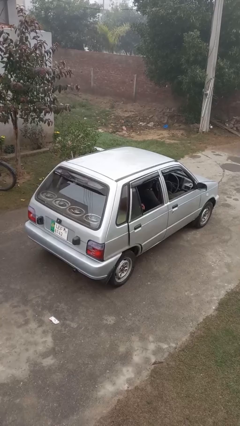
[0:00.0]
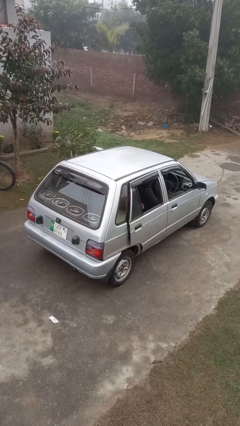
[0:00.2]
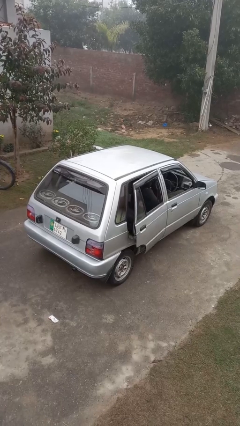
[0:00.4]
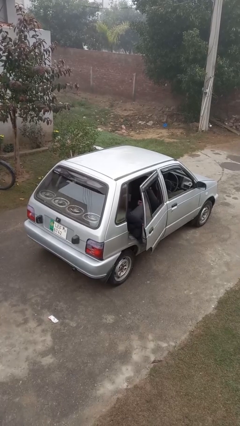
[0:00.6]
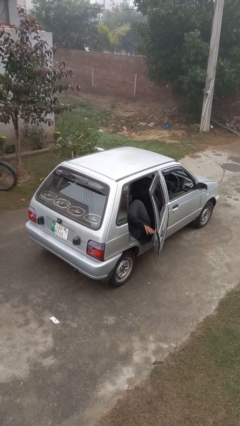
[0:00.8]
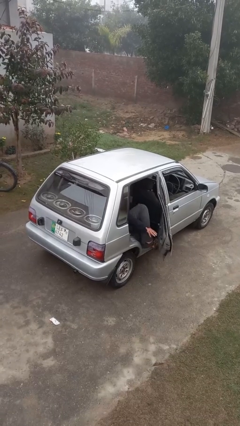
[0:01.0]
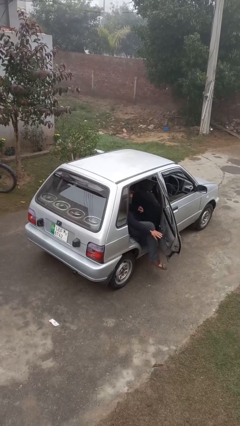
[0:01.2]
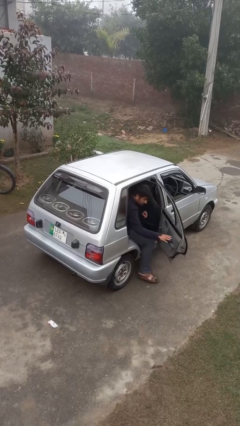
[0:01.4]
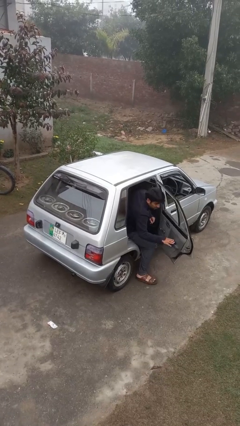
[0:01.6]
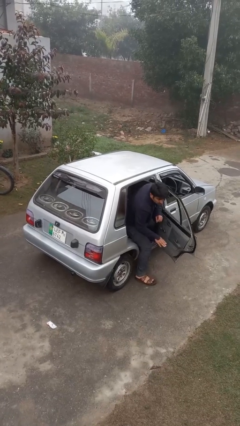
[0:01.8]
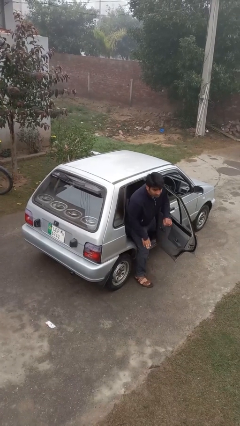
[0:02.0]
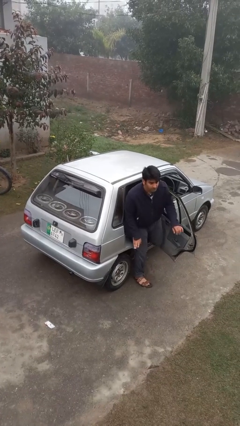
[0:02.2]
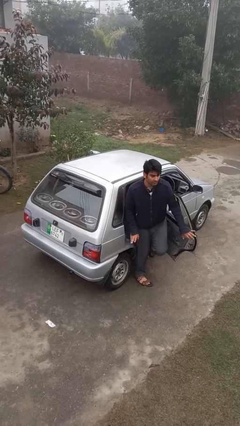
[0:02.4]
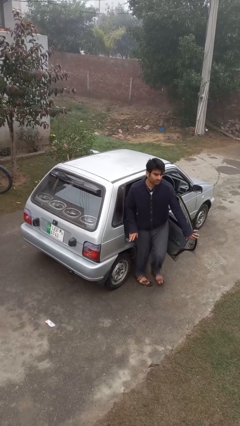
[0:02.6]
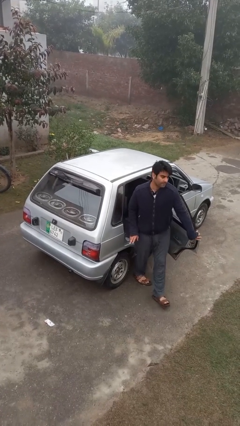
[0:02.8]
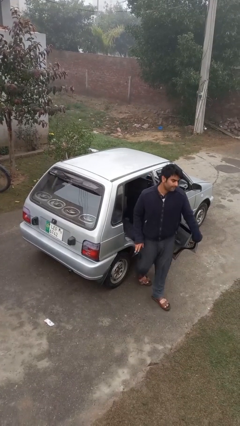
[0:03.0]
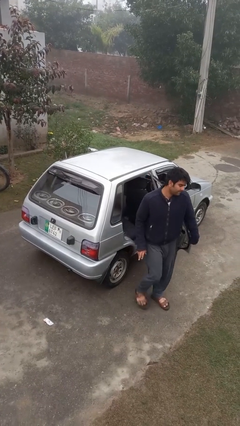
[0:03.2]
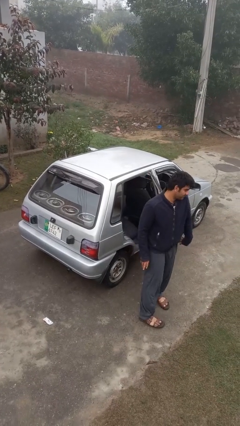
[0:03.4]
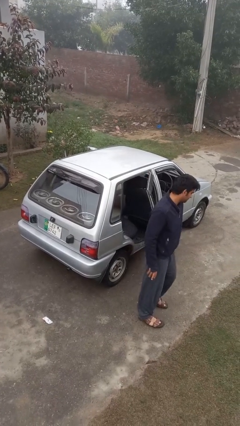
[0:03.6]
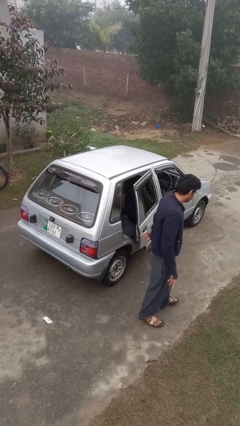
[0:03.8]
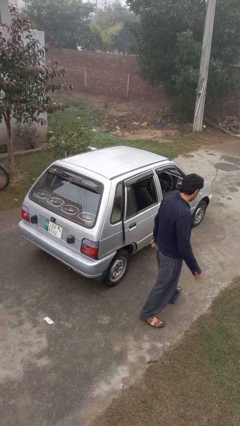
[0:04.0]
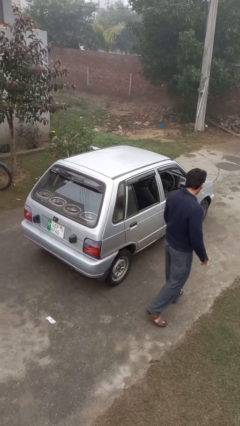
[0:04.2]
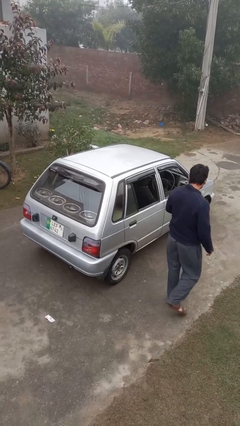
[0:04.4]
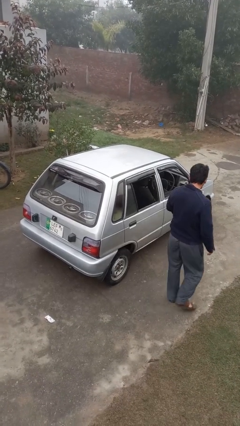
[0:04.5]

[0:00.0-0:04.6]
car drops off person

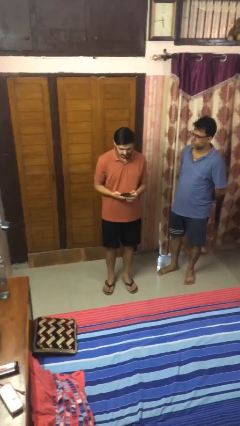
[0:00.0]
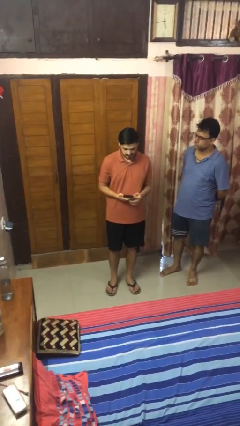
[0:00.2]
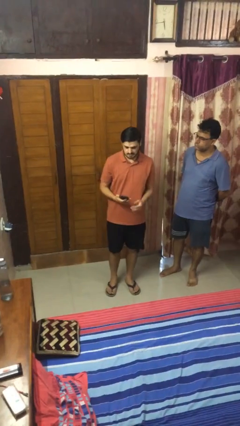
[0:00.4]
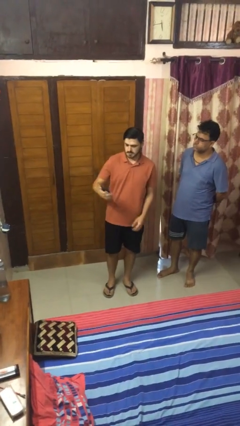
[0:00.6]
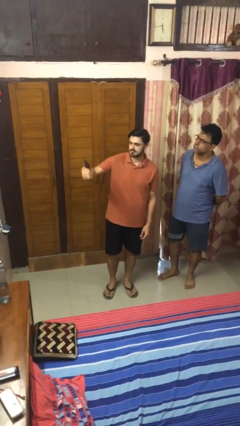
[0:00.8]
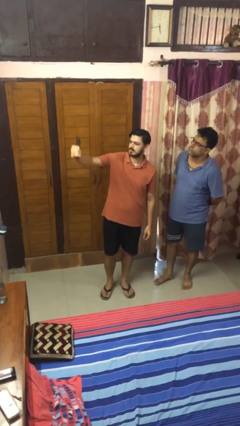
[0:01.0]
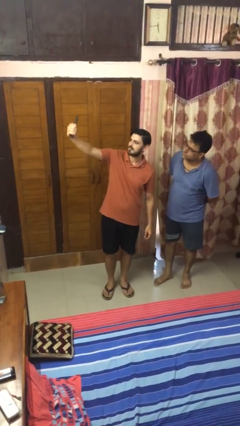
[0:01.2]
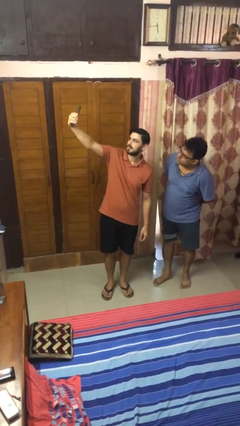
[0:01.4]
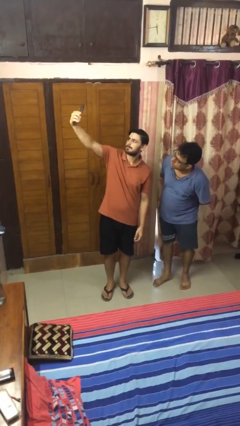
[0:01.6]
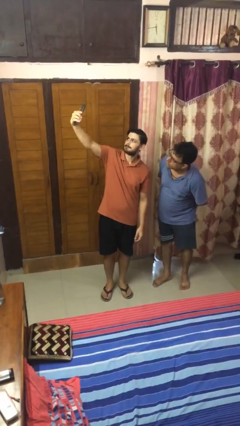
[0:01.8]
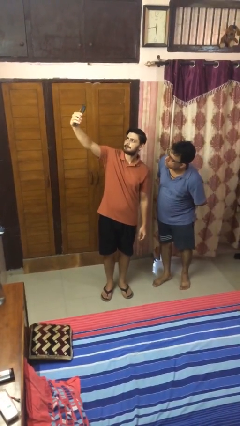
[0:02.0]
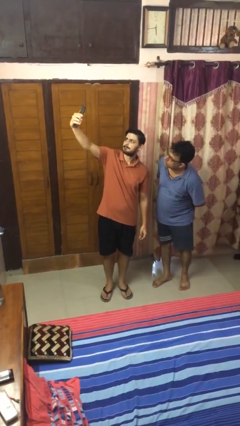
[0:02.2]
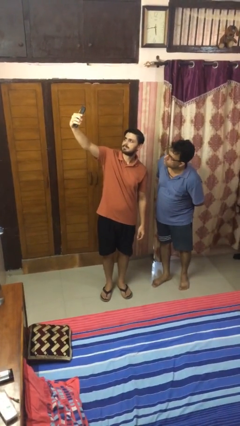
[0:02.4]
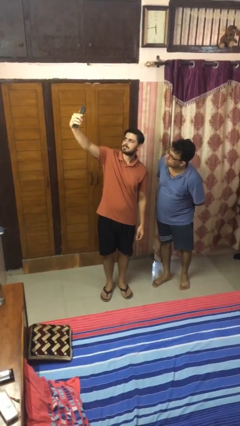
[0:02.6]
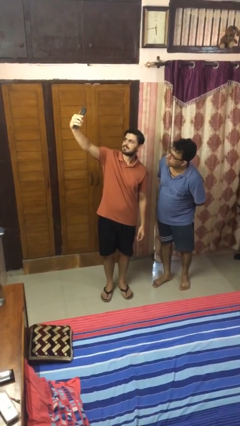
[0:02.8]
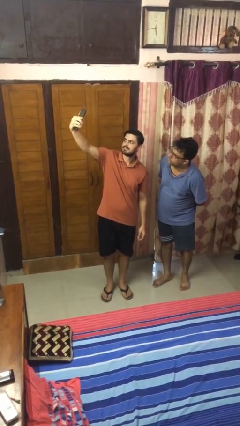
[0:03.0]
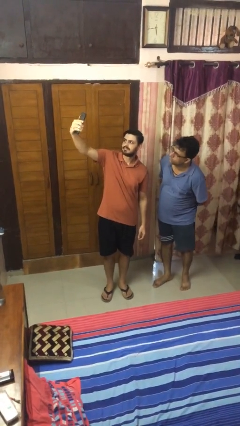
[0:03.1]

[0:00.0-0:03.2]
person takes selfie with person

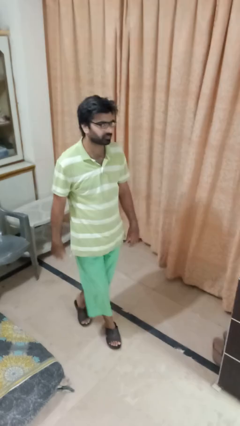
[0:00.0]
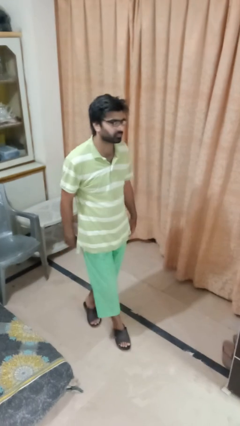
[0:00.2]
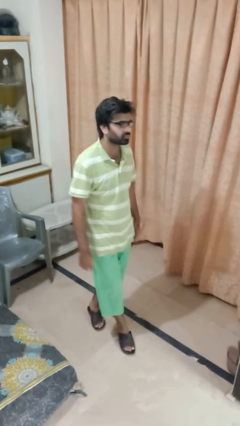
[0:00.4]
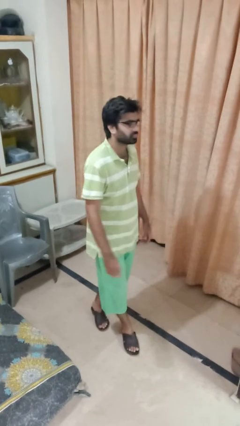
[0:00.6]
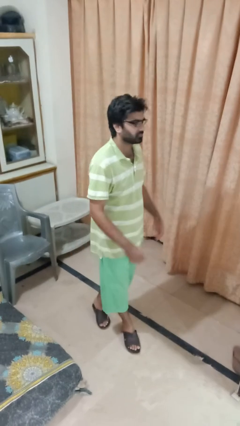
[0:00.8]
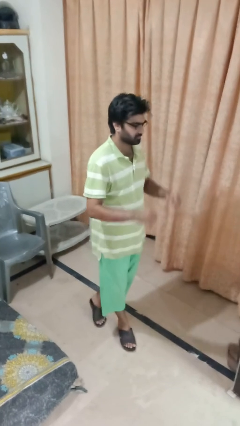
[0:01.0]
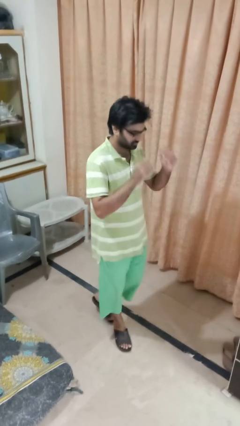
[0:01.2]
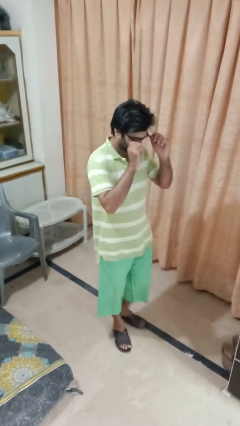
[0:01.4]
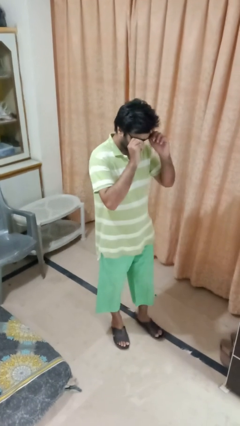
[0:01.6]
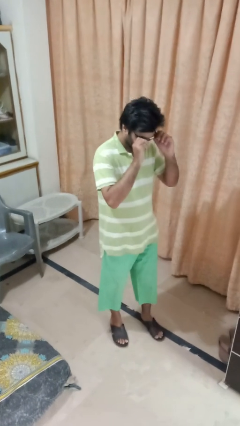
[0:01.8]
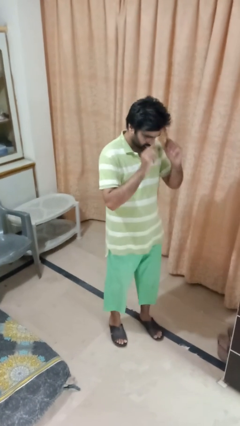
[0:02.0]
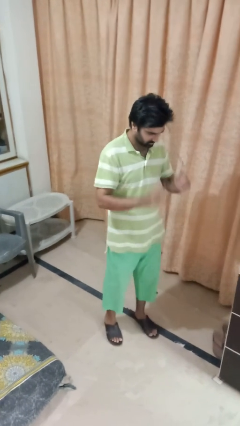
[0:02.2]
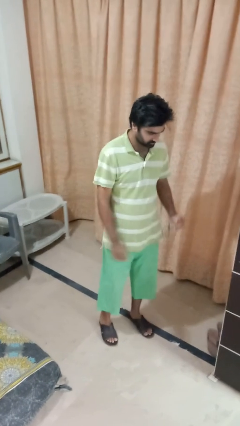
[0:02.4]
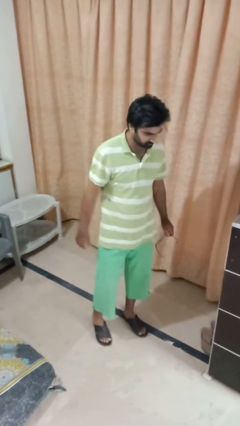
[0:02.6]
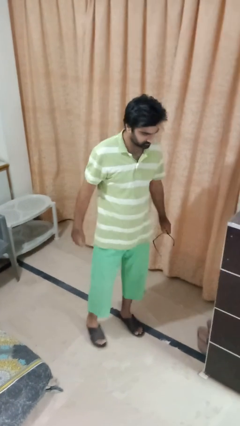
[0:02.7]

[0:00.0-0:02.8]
person takes off glasses

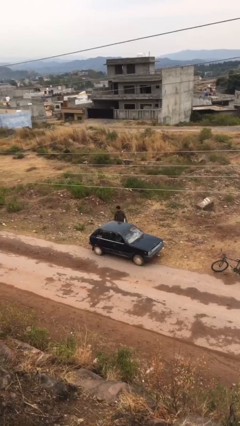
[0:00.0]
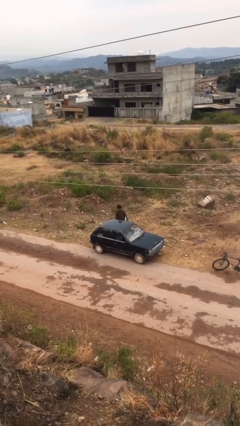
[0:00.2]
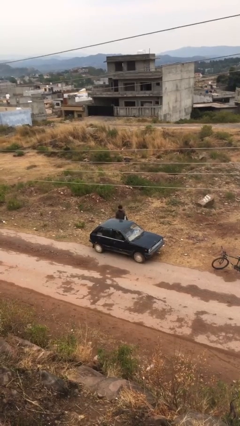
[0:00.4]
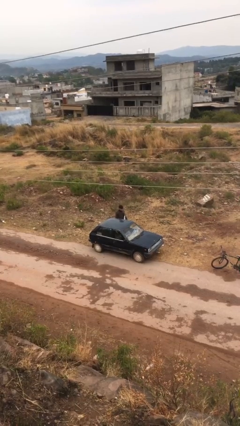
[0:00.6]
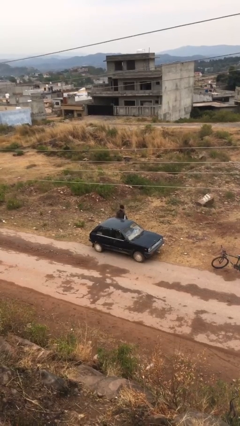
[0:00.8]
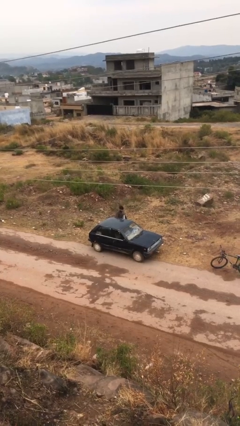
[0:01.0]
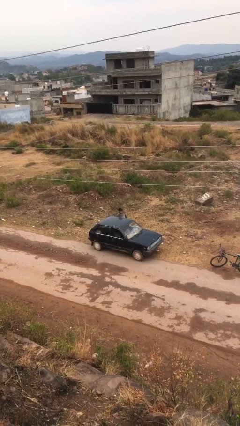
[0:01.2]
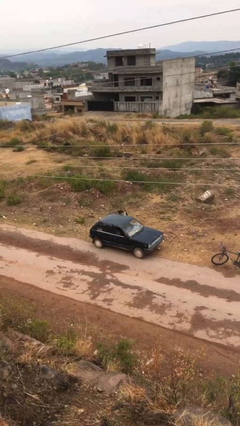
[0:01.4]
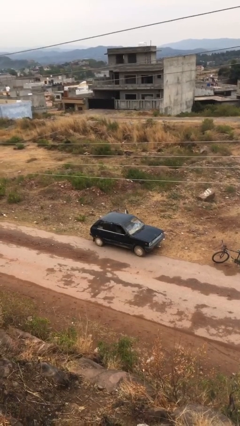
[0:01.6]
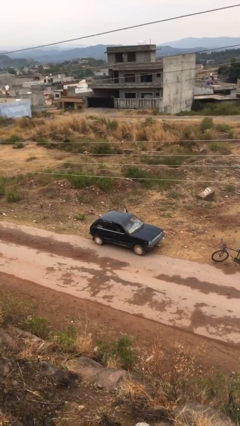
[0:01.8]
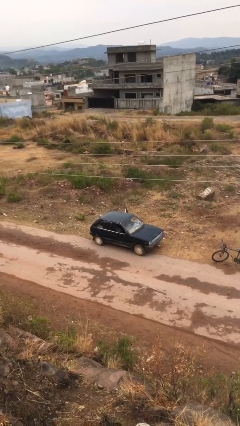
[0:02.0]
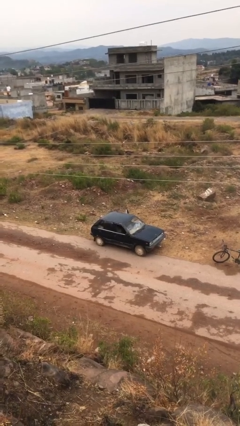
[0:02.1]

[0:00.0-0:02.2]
person enters car

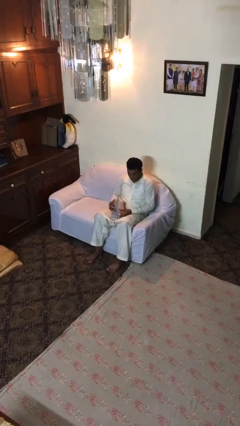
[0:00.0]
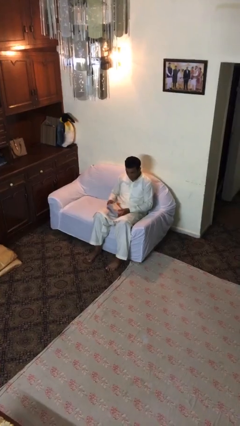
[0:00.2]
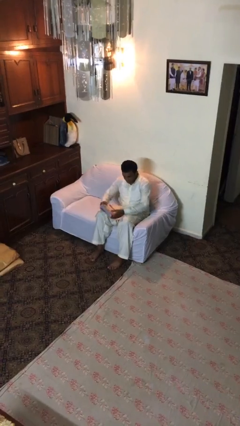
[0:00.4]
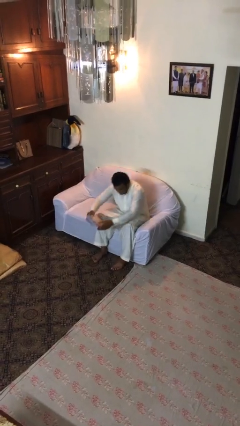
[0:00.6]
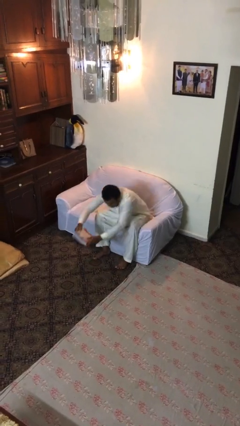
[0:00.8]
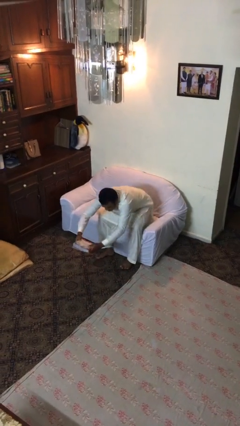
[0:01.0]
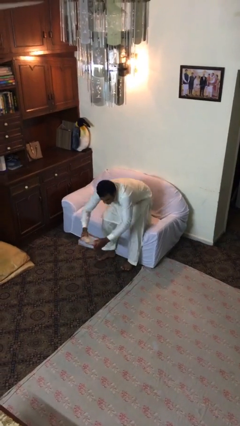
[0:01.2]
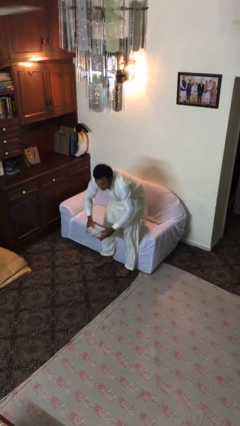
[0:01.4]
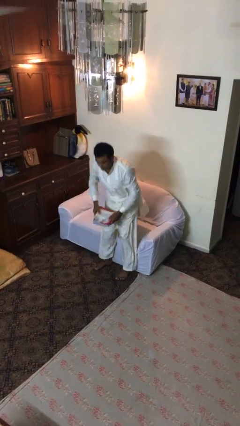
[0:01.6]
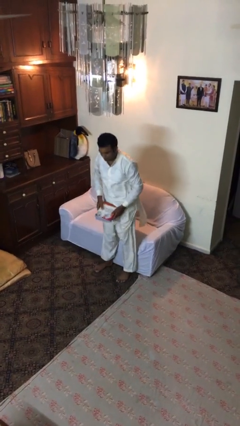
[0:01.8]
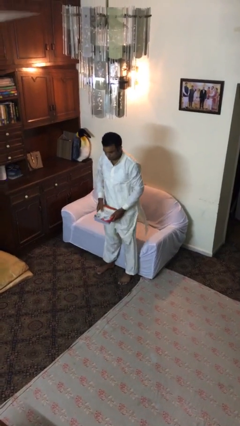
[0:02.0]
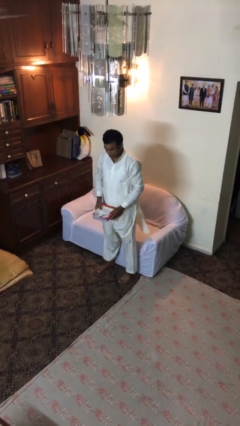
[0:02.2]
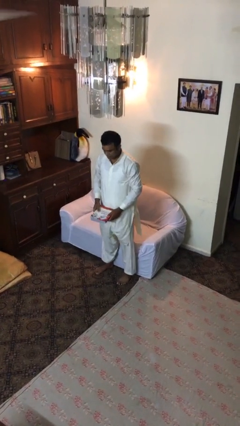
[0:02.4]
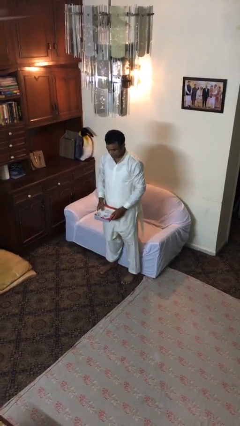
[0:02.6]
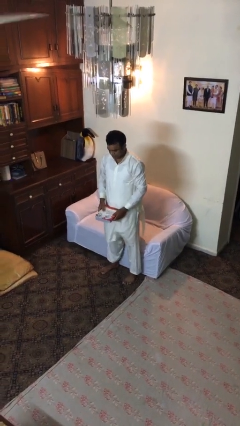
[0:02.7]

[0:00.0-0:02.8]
person stands up

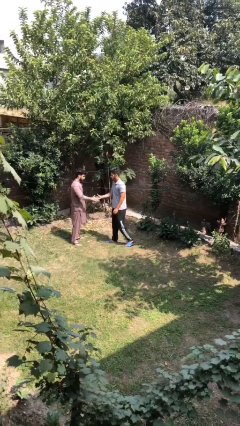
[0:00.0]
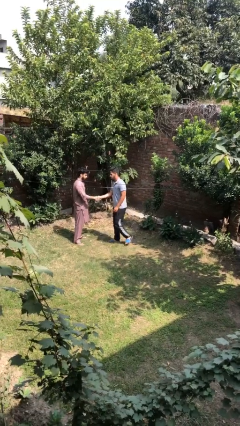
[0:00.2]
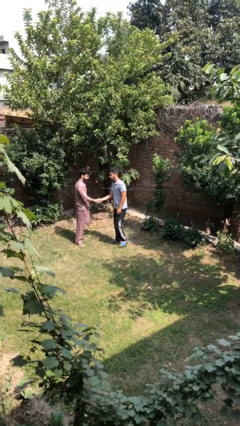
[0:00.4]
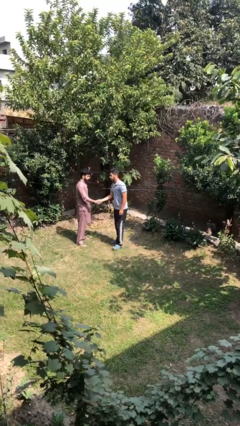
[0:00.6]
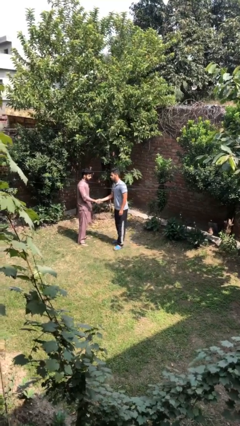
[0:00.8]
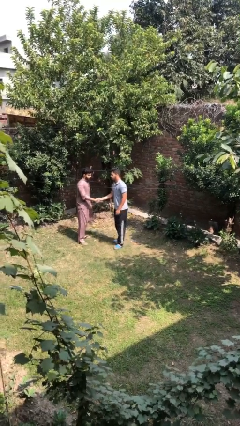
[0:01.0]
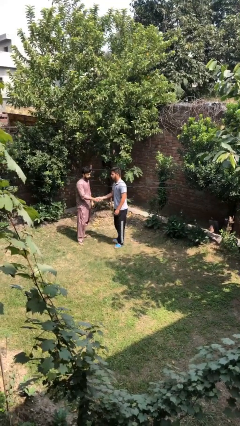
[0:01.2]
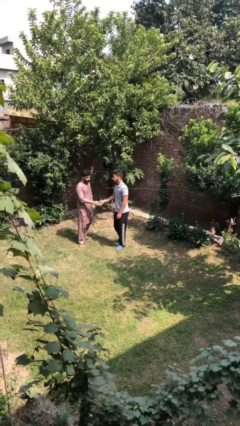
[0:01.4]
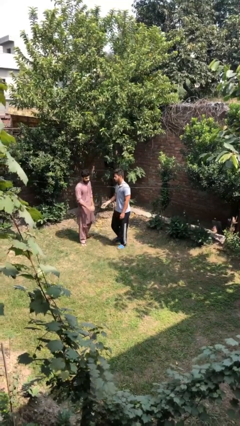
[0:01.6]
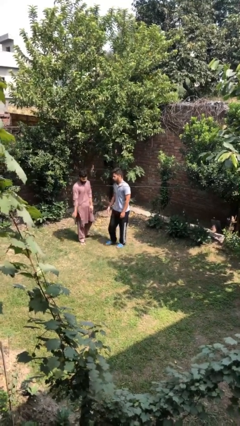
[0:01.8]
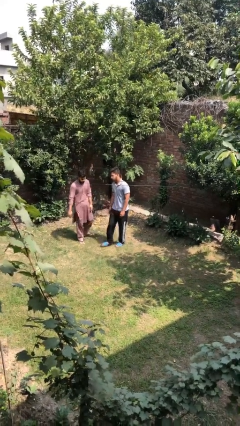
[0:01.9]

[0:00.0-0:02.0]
person shakes hand
